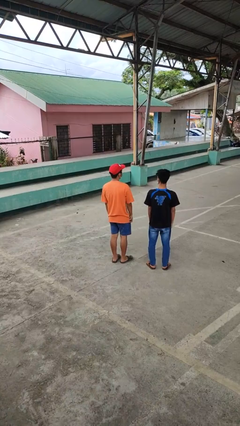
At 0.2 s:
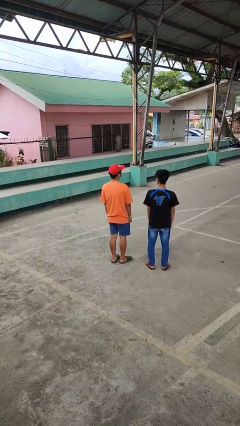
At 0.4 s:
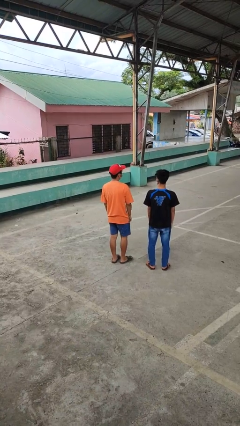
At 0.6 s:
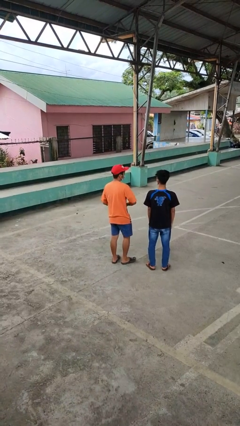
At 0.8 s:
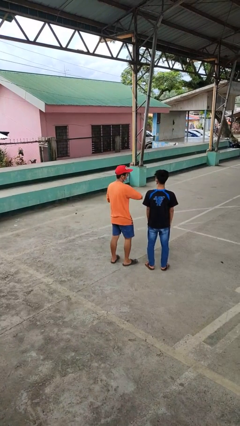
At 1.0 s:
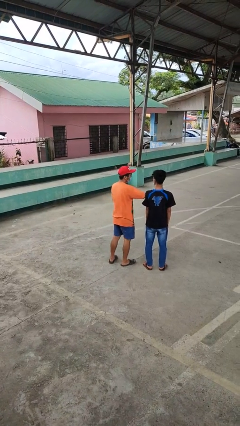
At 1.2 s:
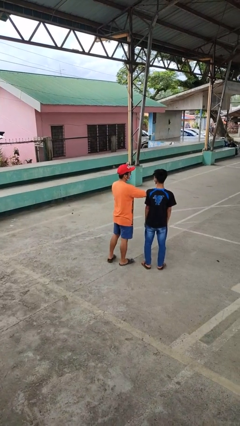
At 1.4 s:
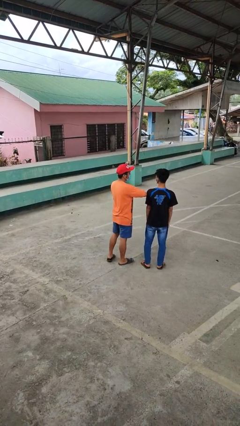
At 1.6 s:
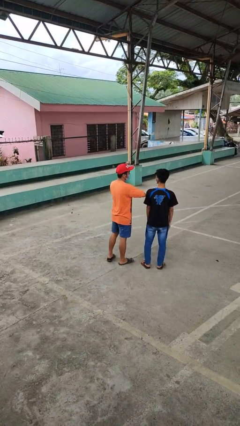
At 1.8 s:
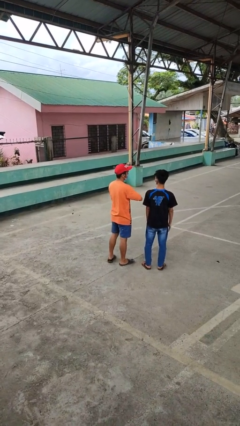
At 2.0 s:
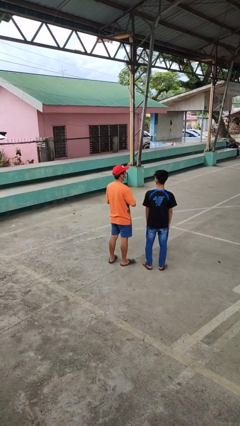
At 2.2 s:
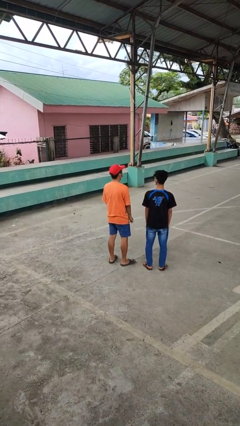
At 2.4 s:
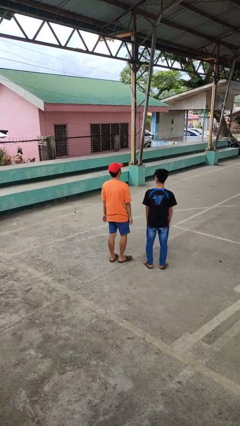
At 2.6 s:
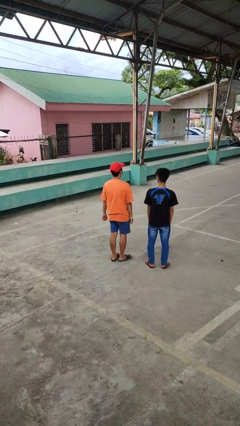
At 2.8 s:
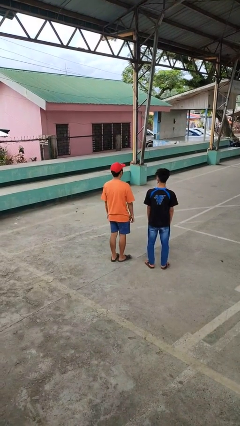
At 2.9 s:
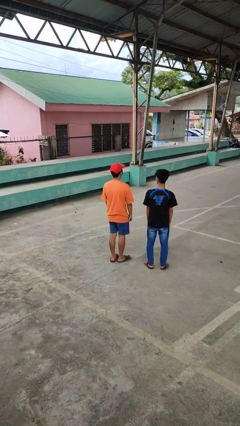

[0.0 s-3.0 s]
person nudges person with elbow

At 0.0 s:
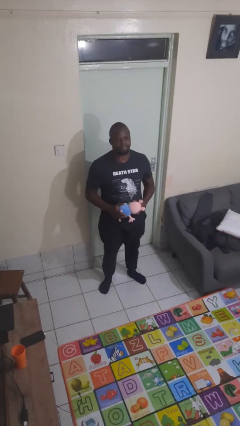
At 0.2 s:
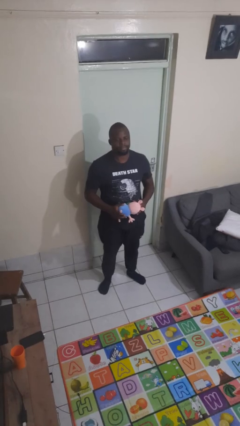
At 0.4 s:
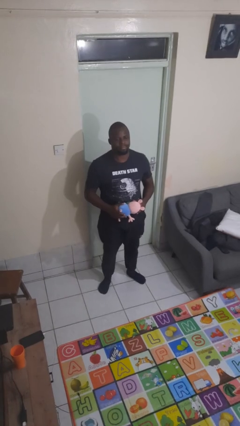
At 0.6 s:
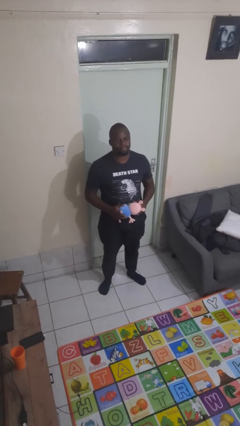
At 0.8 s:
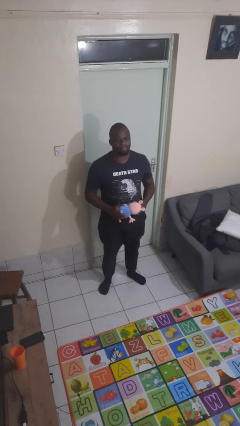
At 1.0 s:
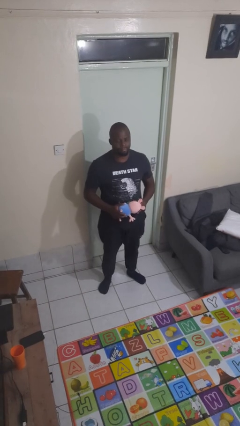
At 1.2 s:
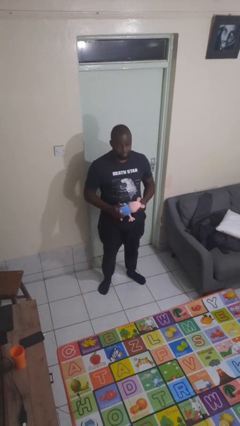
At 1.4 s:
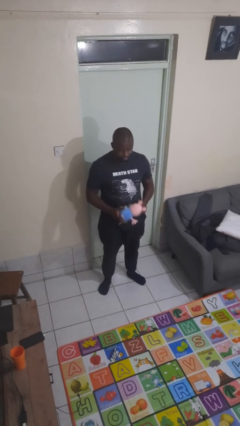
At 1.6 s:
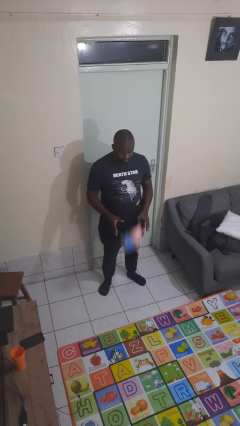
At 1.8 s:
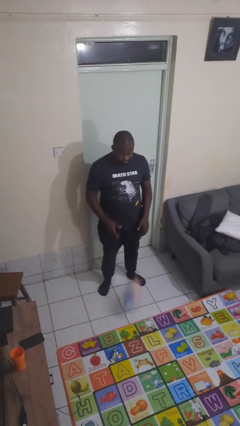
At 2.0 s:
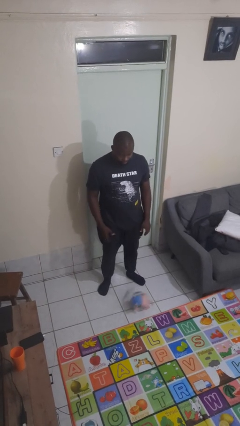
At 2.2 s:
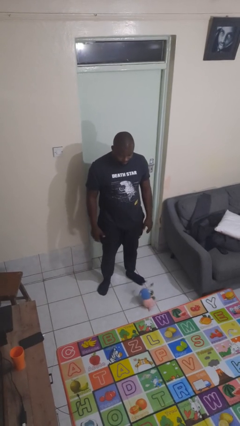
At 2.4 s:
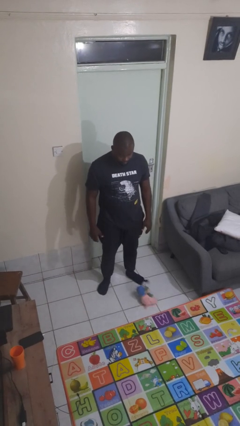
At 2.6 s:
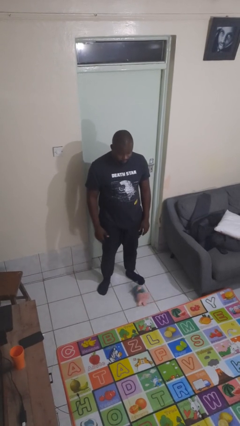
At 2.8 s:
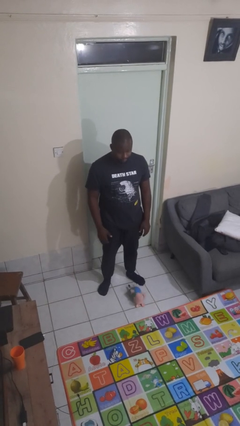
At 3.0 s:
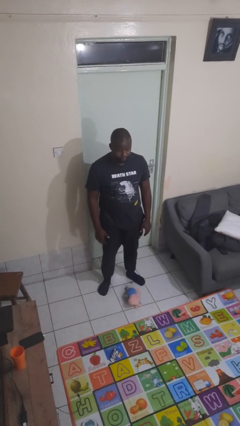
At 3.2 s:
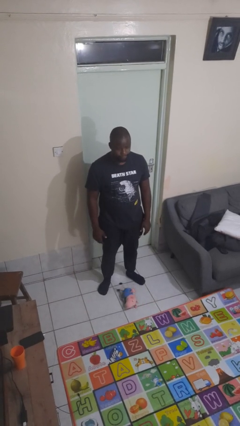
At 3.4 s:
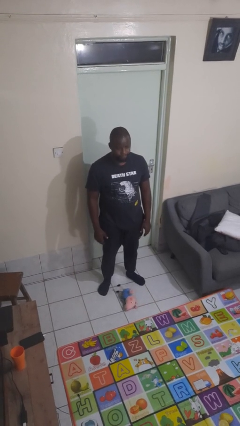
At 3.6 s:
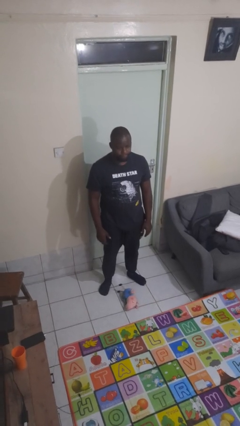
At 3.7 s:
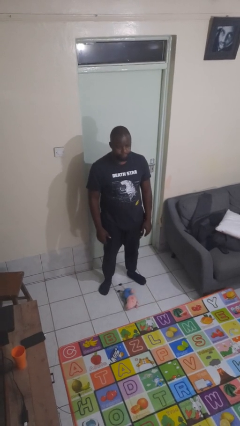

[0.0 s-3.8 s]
person drops object

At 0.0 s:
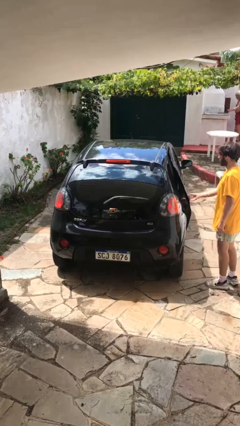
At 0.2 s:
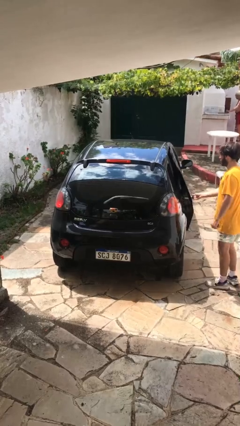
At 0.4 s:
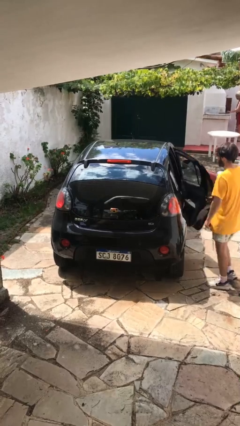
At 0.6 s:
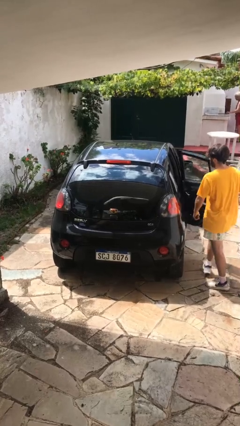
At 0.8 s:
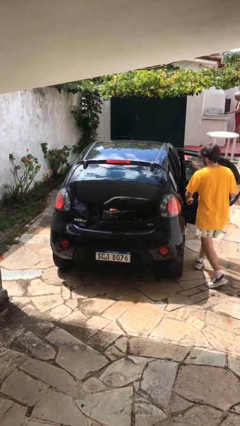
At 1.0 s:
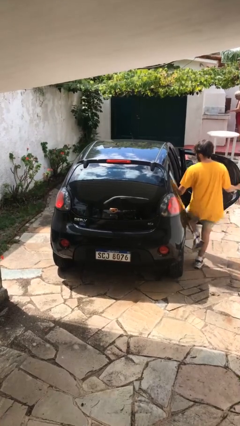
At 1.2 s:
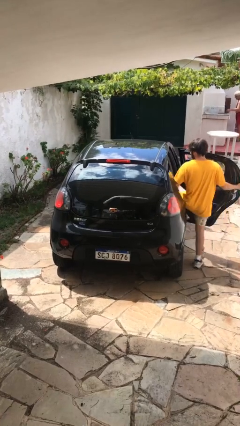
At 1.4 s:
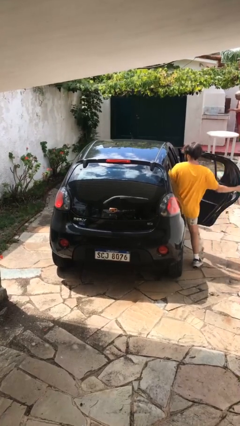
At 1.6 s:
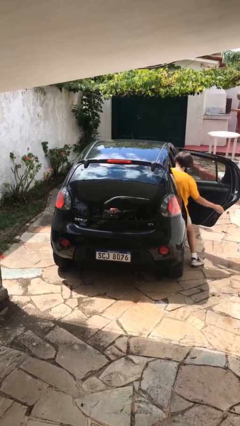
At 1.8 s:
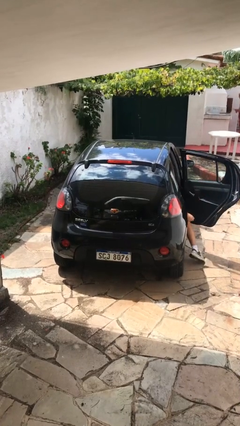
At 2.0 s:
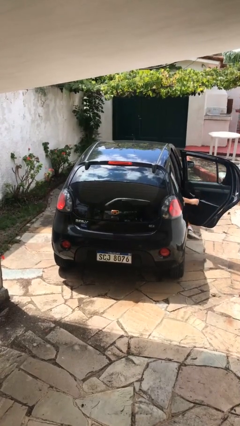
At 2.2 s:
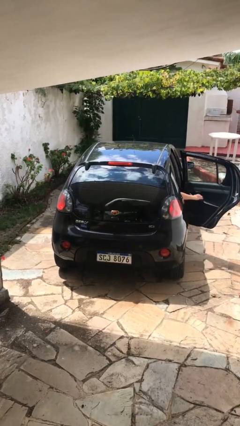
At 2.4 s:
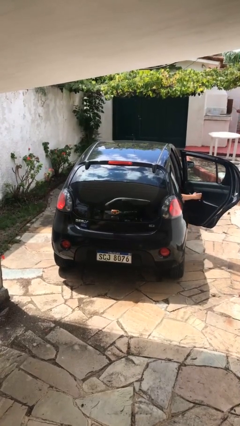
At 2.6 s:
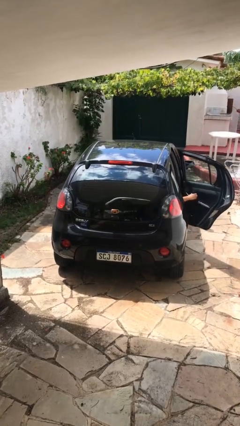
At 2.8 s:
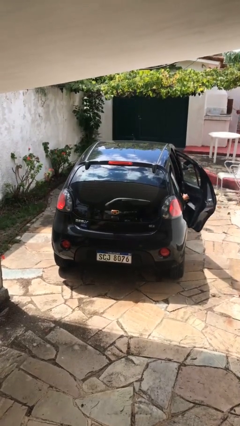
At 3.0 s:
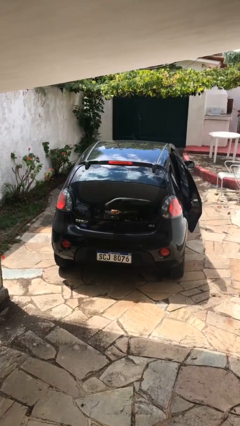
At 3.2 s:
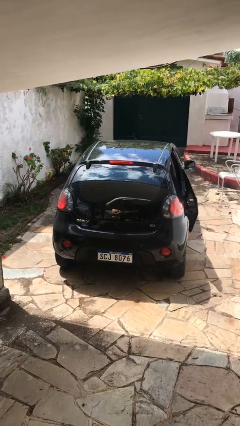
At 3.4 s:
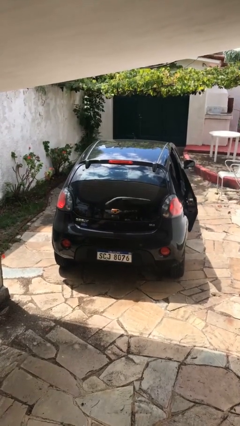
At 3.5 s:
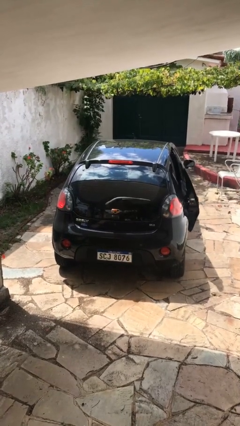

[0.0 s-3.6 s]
car picks up person

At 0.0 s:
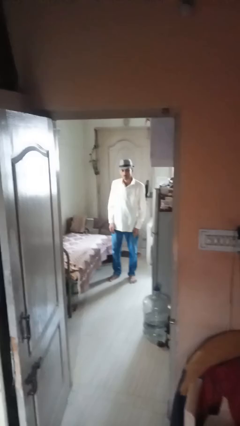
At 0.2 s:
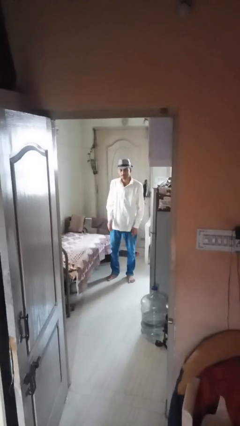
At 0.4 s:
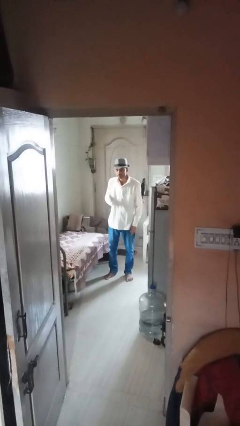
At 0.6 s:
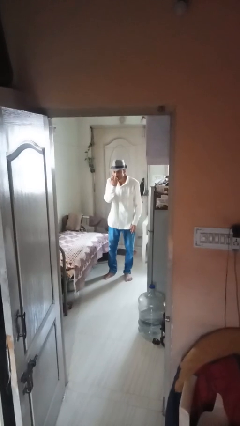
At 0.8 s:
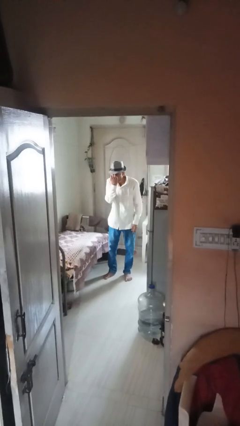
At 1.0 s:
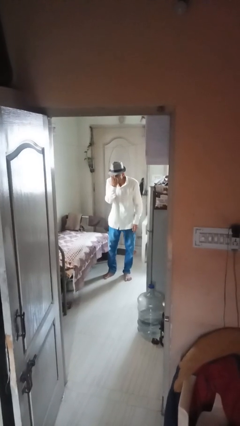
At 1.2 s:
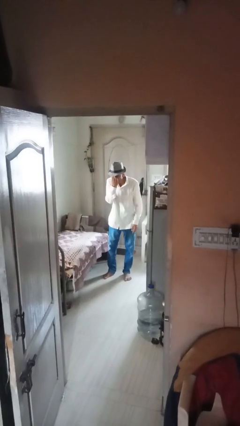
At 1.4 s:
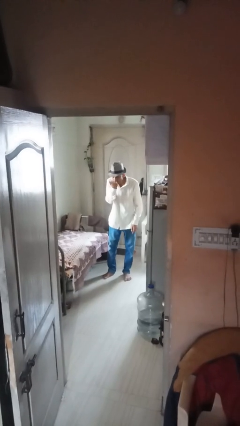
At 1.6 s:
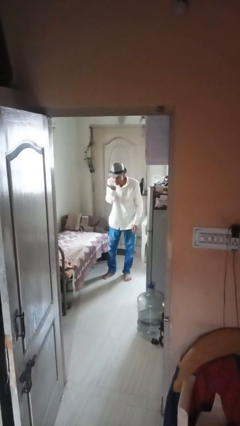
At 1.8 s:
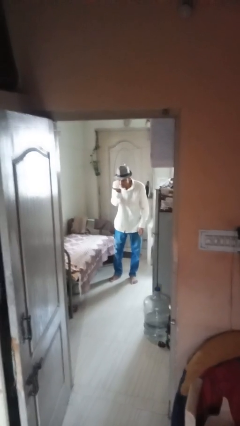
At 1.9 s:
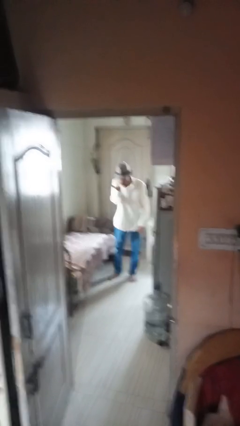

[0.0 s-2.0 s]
person gestures blow kiss

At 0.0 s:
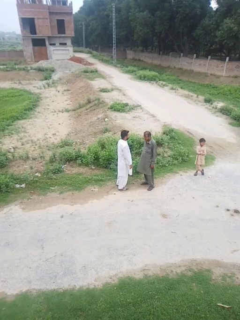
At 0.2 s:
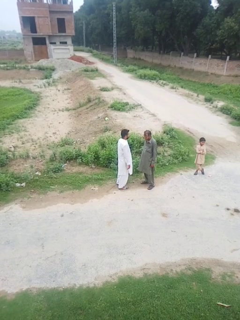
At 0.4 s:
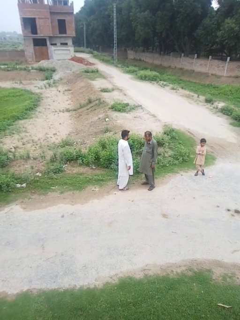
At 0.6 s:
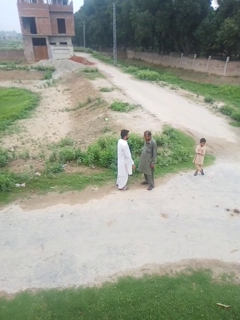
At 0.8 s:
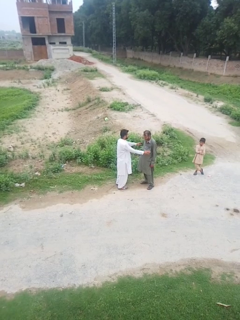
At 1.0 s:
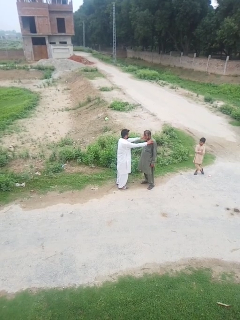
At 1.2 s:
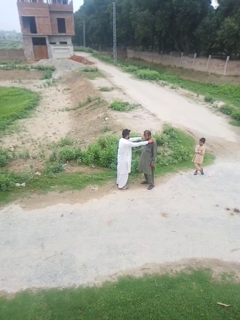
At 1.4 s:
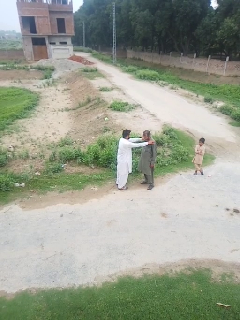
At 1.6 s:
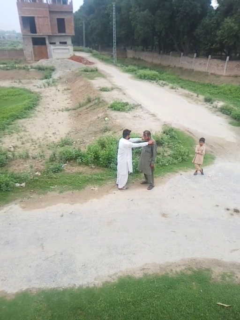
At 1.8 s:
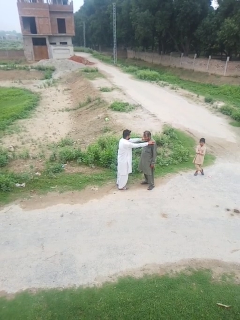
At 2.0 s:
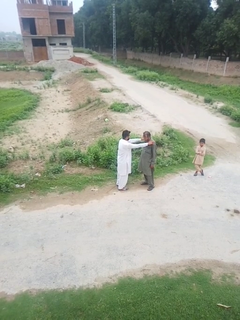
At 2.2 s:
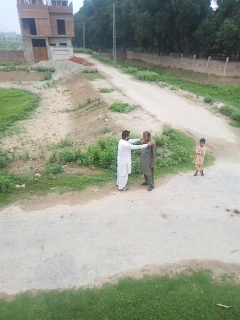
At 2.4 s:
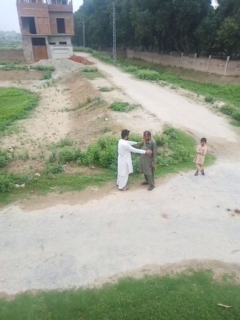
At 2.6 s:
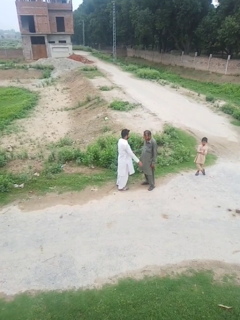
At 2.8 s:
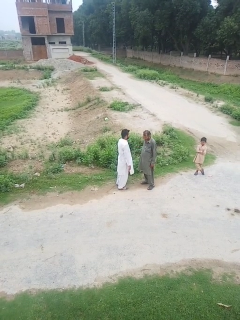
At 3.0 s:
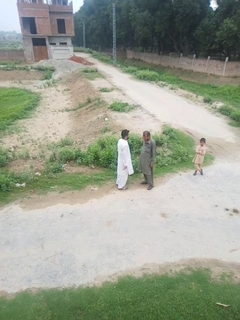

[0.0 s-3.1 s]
person pounds shoulders of person

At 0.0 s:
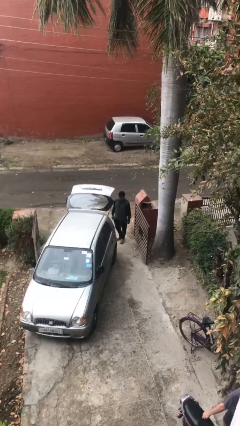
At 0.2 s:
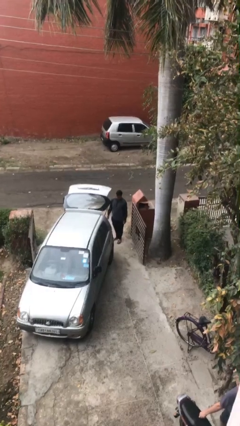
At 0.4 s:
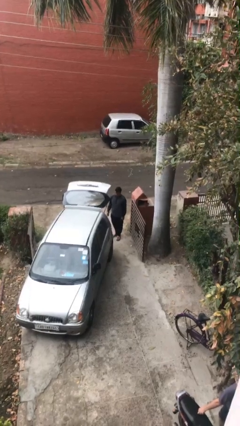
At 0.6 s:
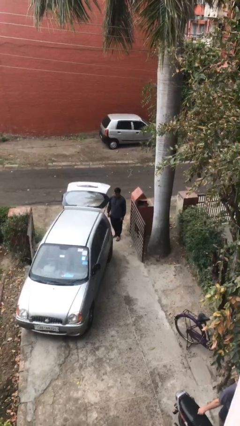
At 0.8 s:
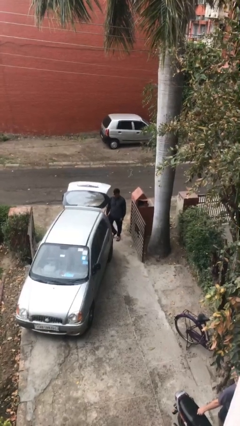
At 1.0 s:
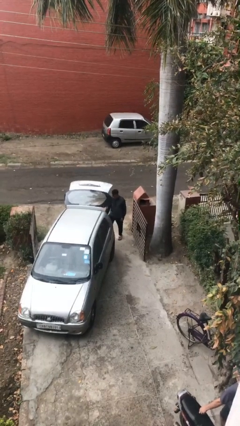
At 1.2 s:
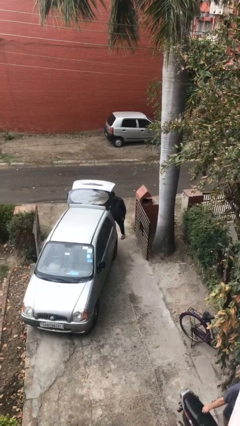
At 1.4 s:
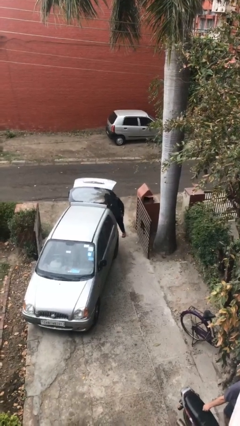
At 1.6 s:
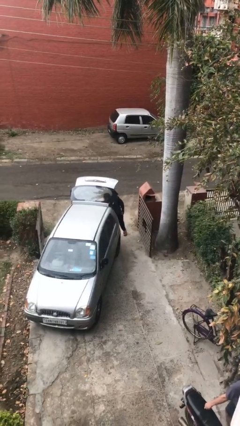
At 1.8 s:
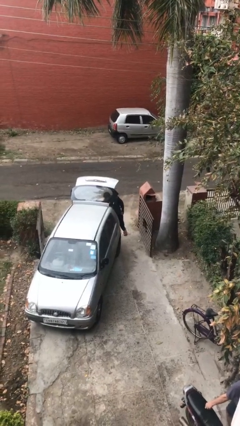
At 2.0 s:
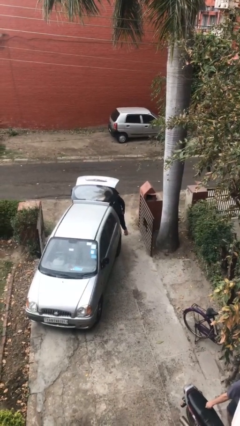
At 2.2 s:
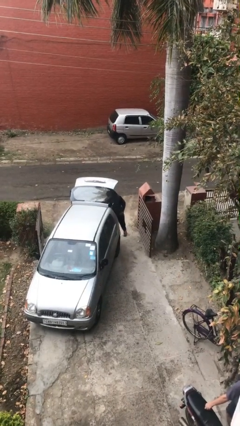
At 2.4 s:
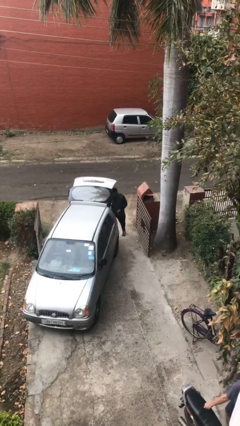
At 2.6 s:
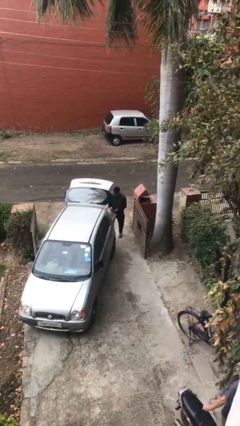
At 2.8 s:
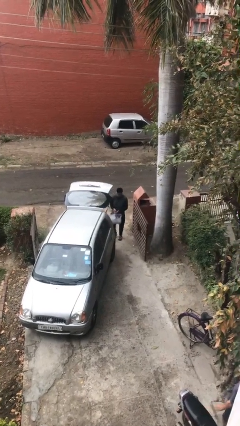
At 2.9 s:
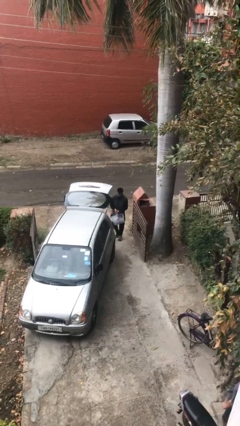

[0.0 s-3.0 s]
person unloads car
